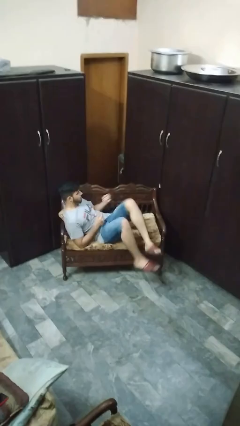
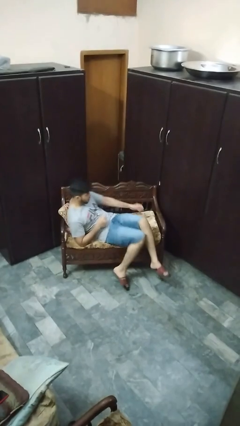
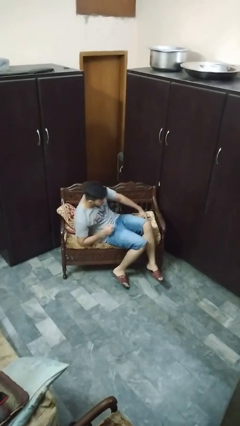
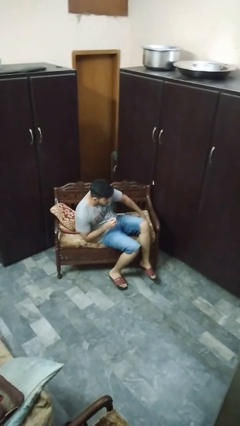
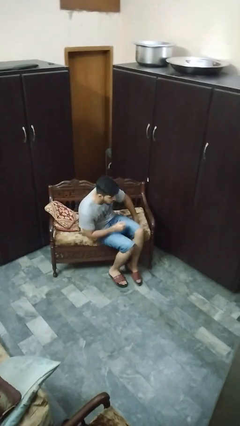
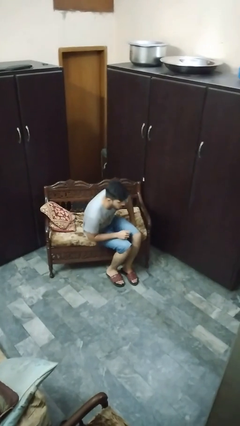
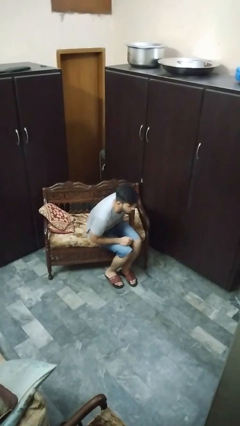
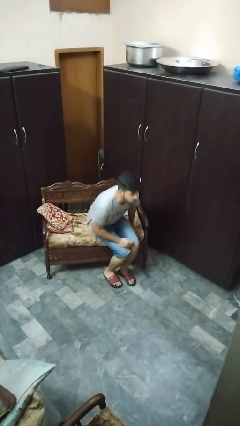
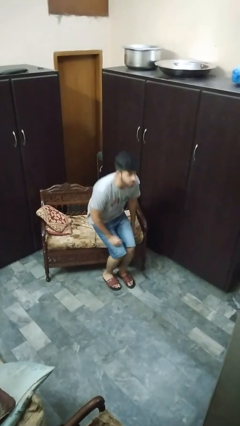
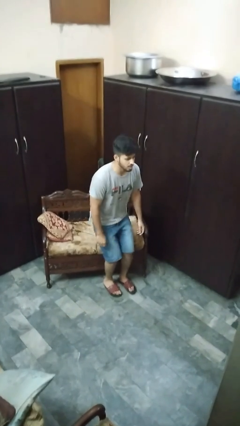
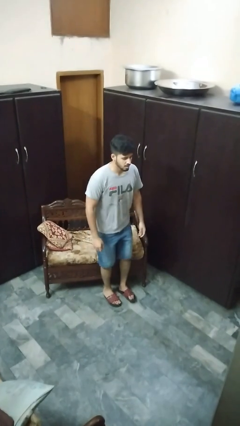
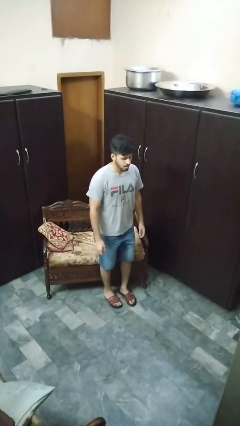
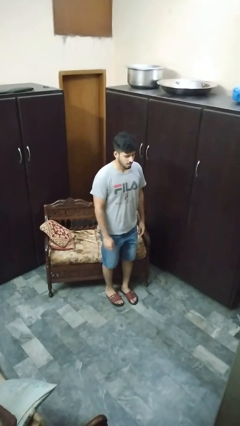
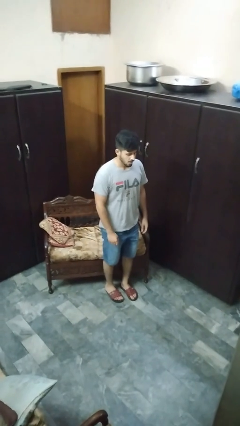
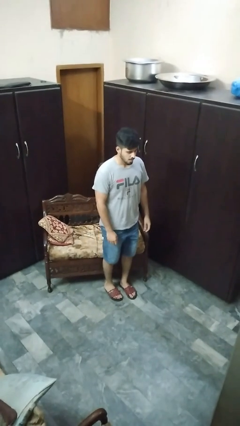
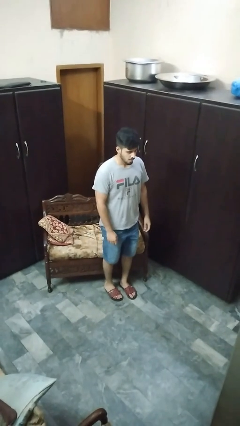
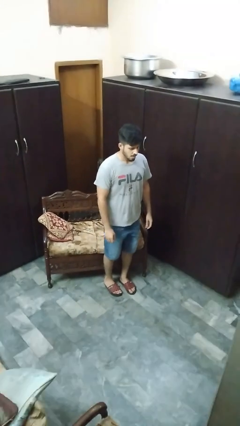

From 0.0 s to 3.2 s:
person stands up

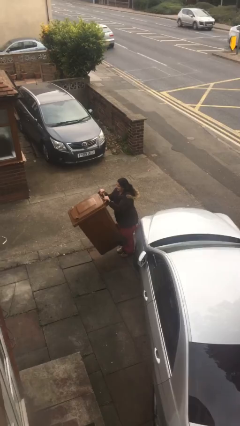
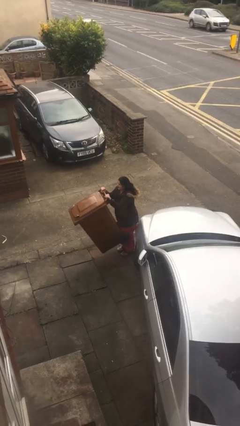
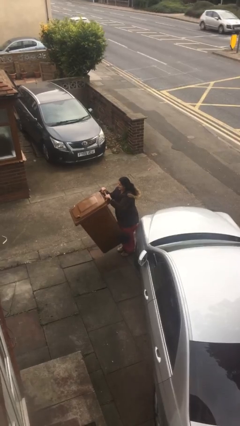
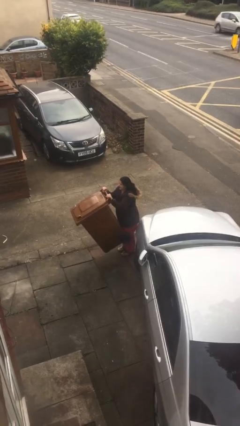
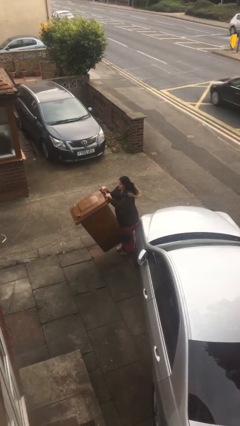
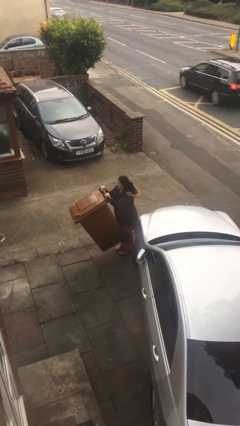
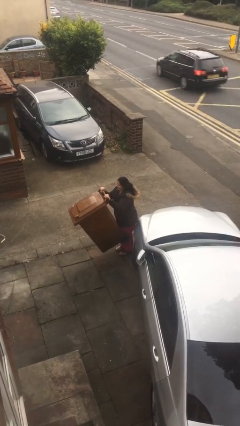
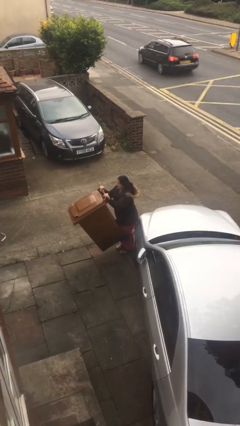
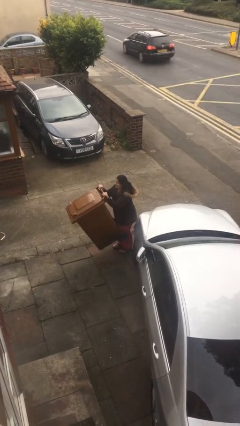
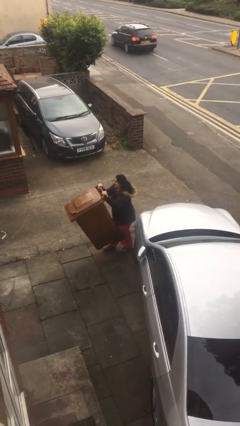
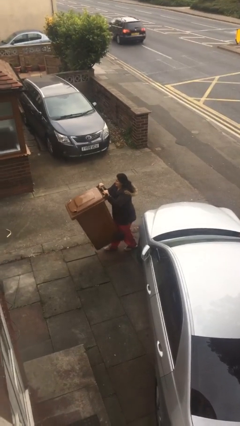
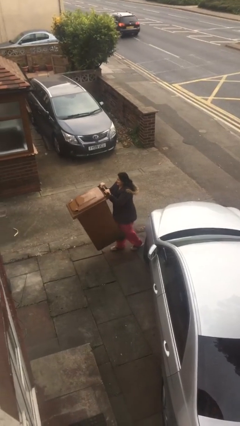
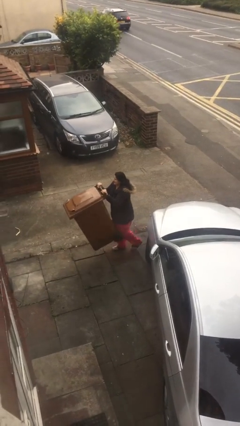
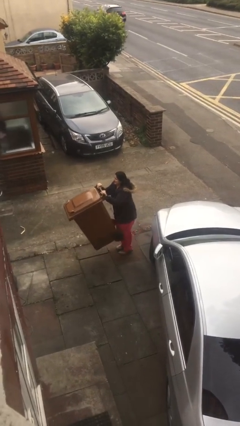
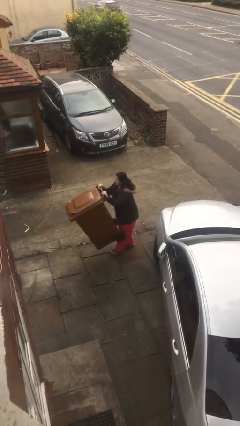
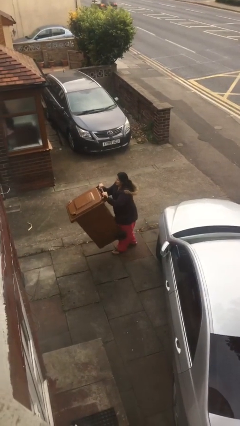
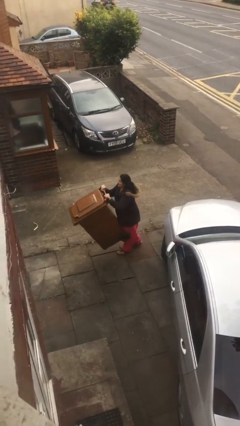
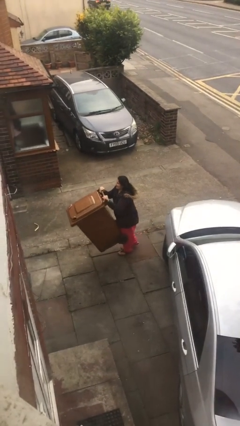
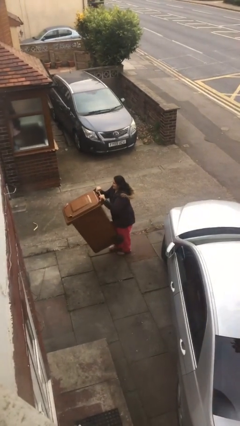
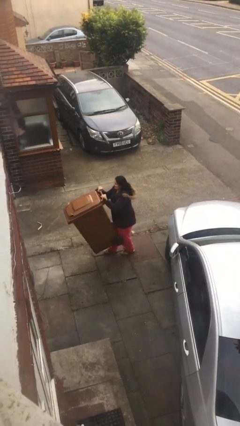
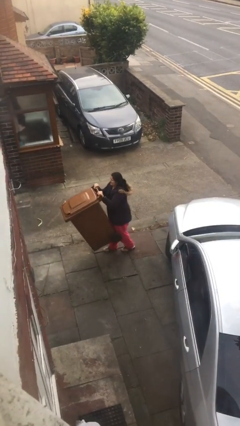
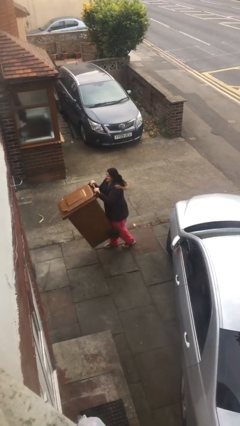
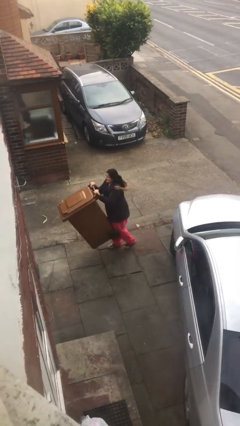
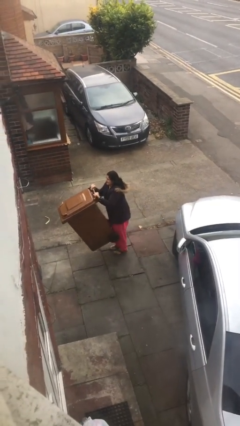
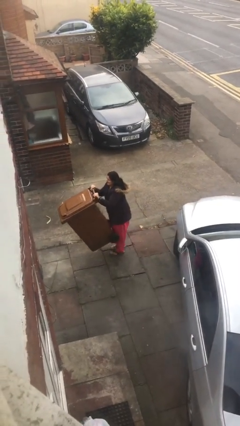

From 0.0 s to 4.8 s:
person carries heavy object

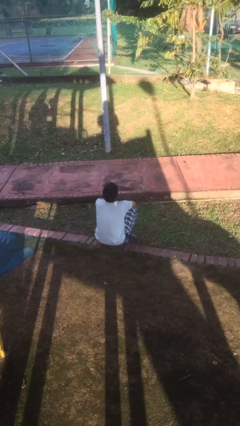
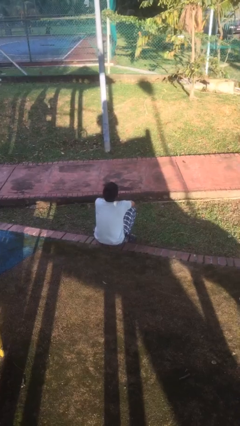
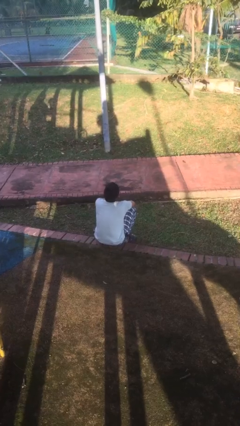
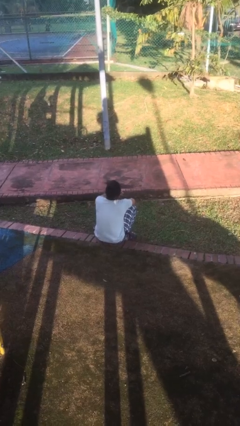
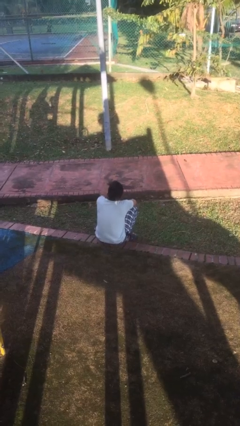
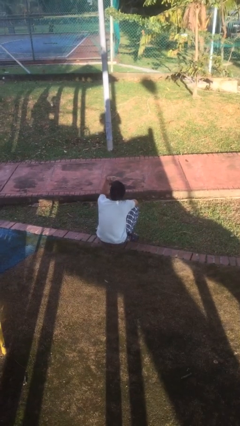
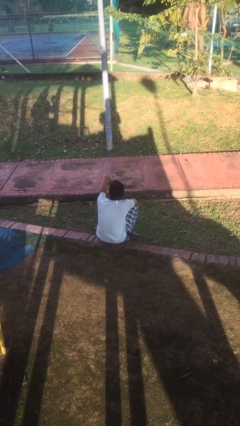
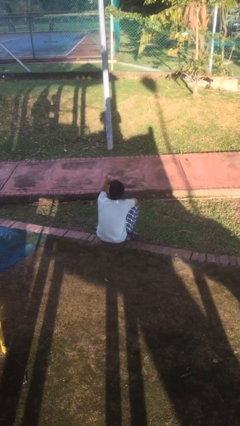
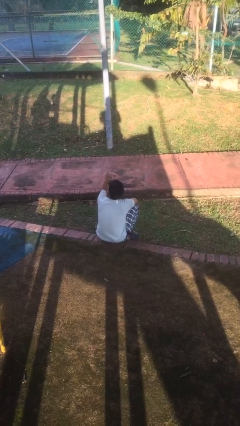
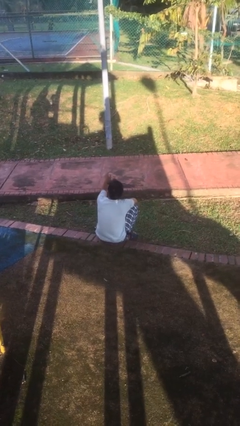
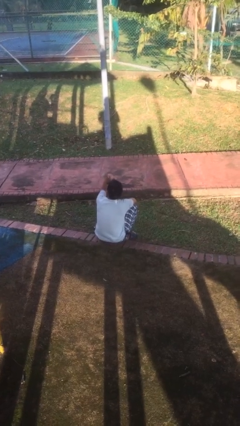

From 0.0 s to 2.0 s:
person gestures watch closely

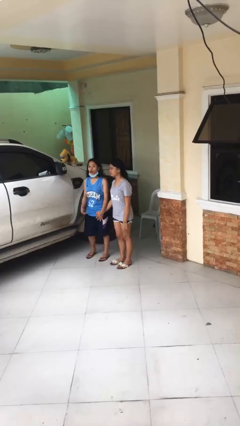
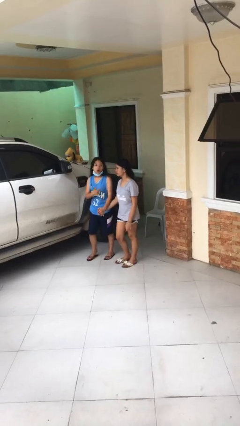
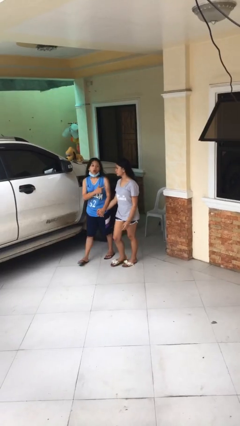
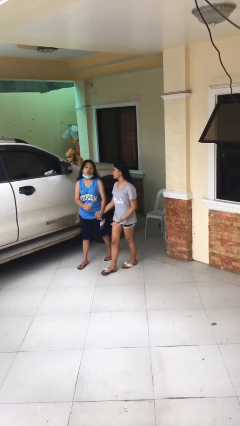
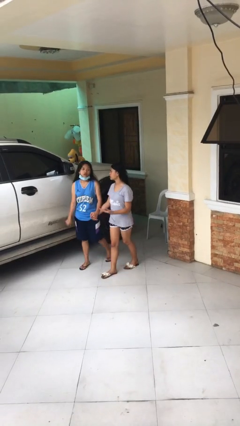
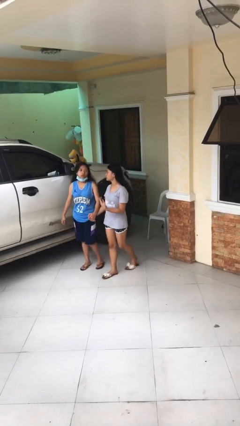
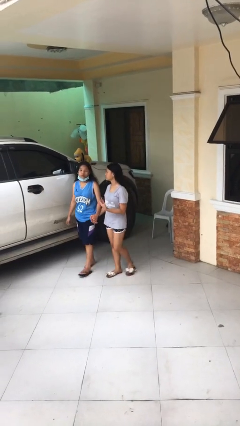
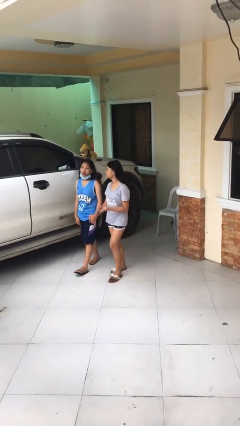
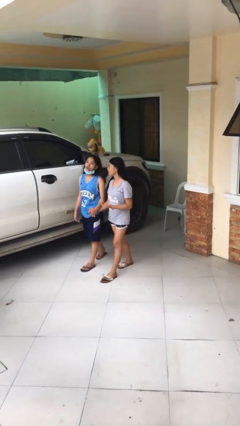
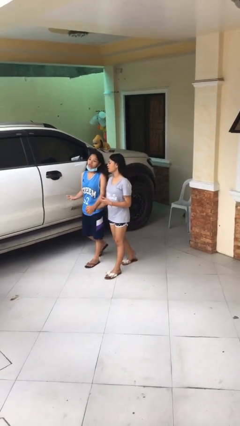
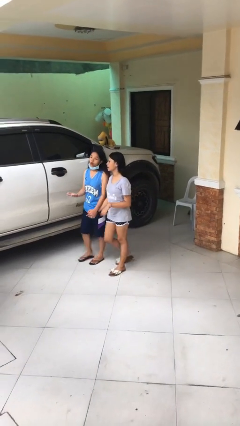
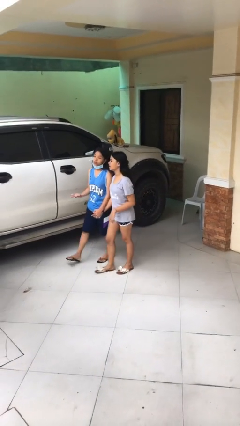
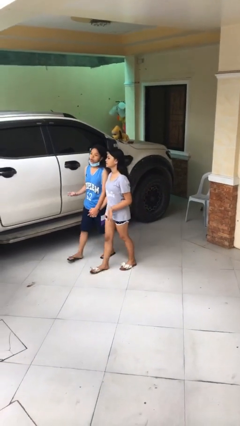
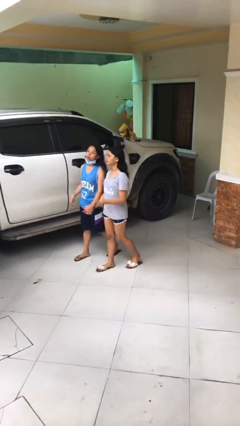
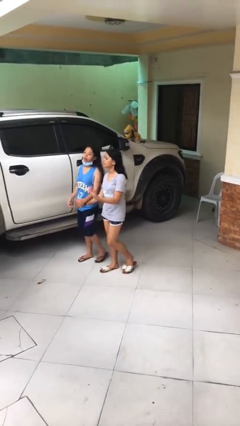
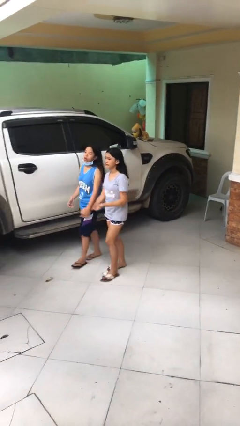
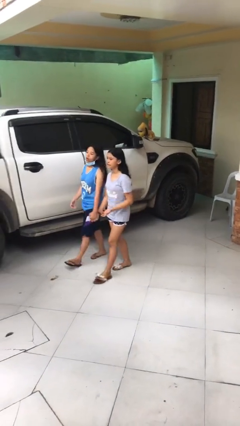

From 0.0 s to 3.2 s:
person holds hand

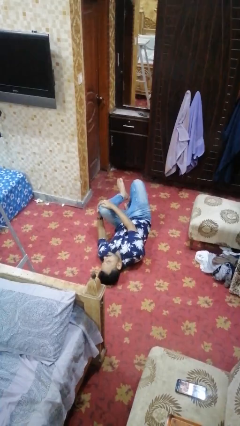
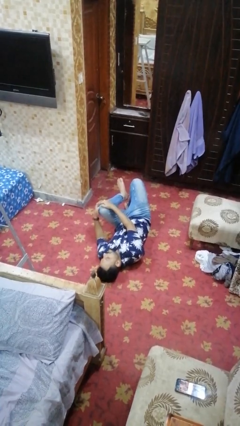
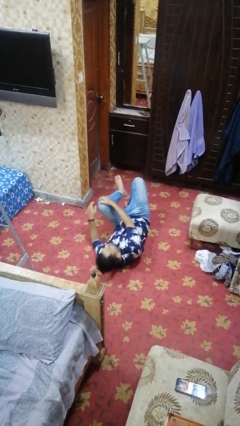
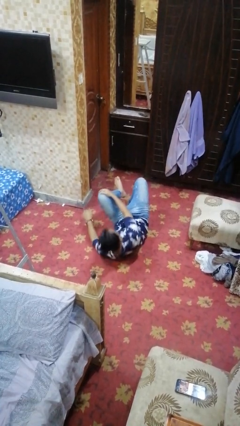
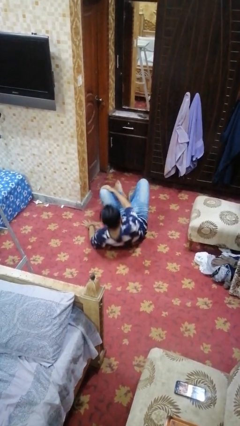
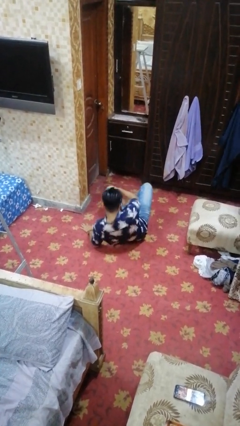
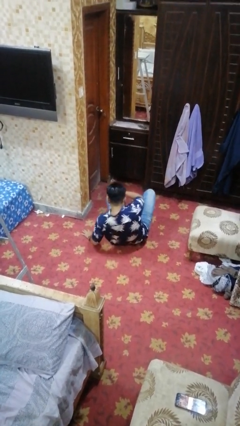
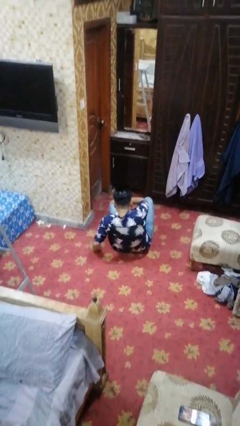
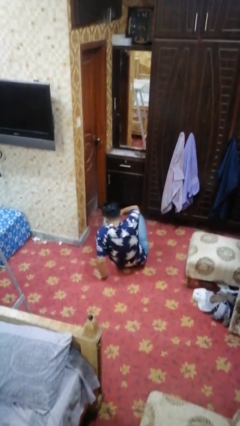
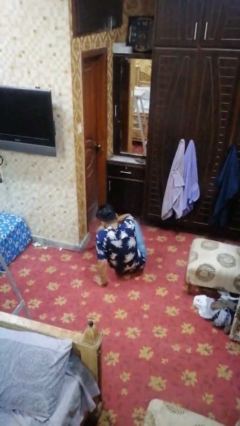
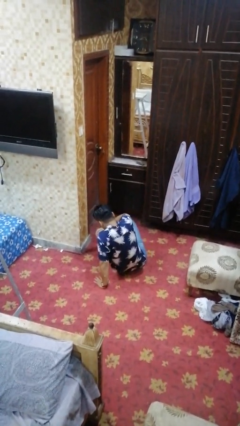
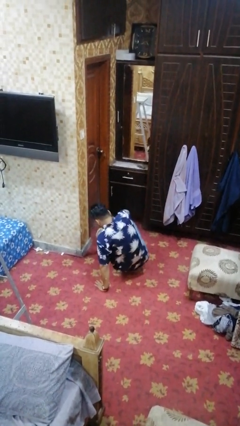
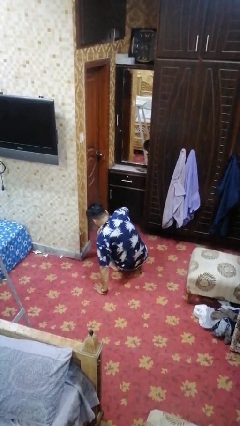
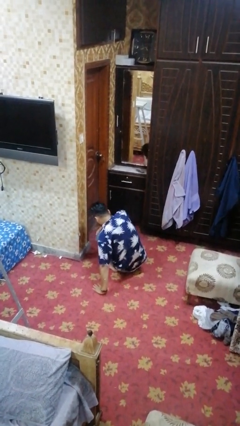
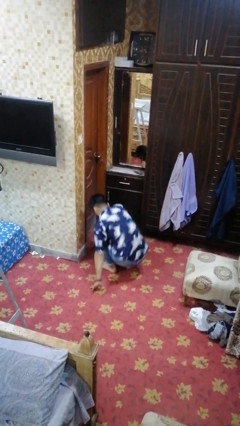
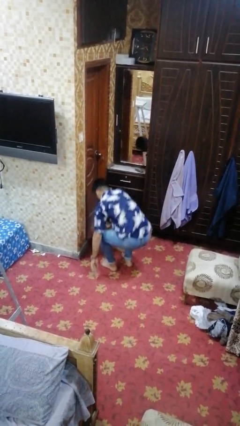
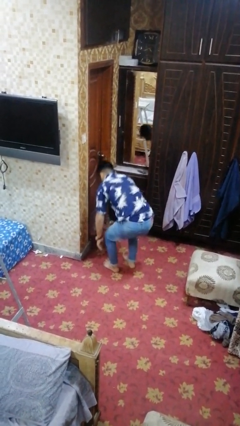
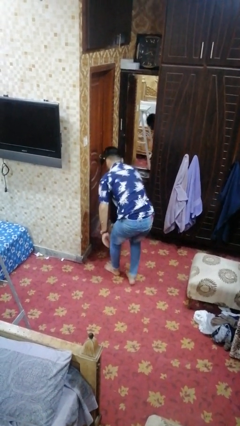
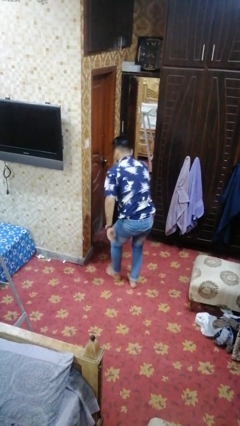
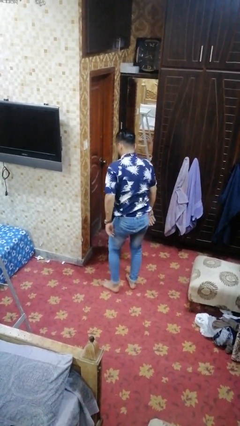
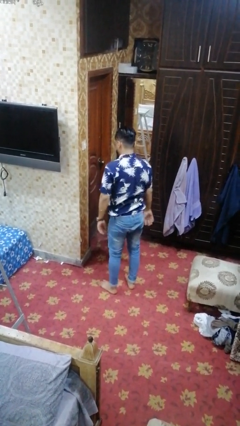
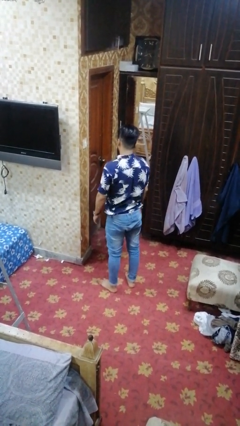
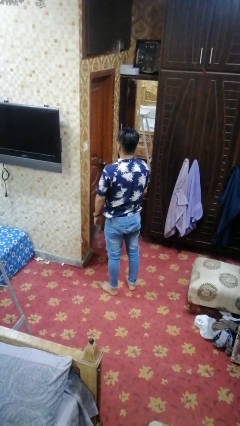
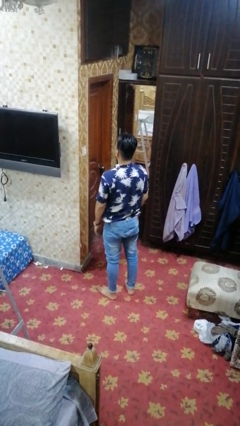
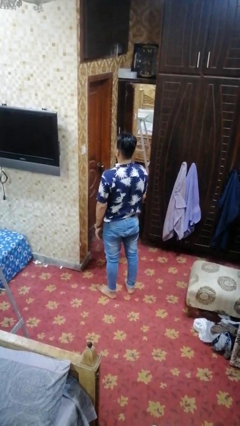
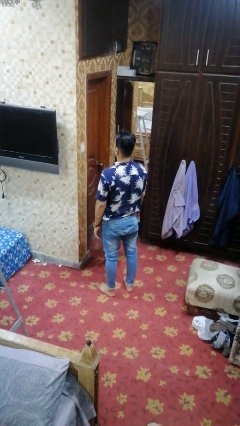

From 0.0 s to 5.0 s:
person stands up from floor
